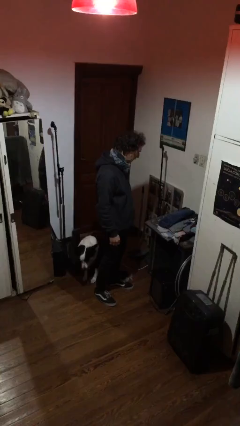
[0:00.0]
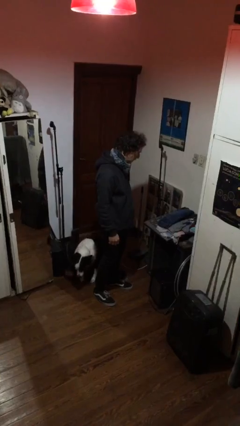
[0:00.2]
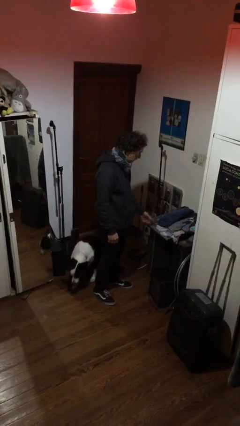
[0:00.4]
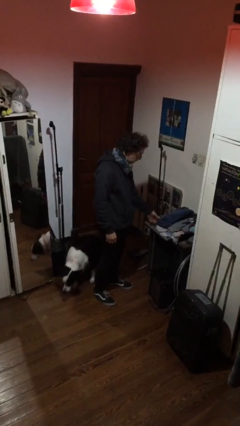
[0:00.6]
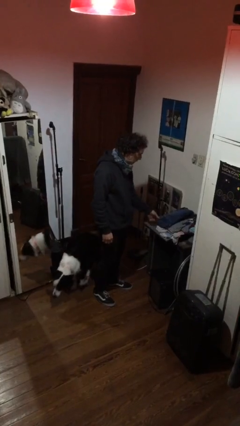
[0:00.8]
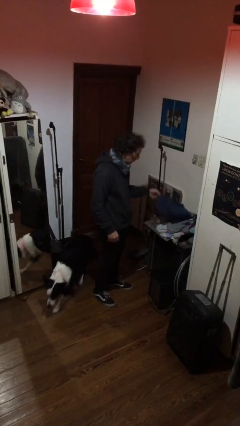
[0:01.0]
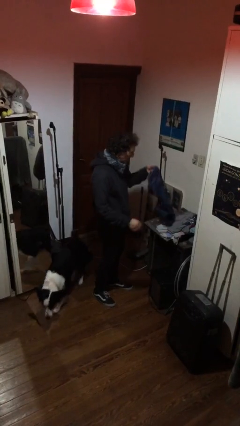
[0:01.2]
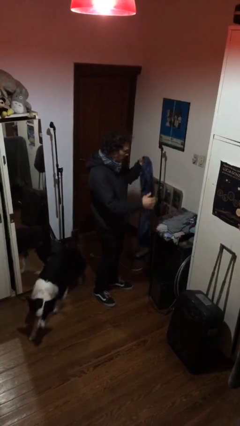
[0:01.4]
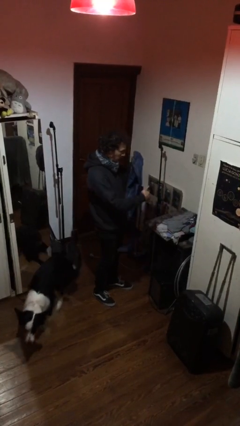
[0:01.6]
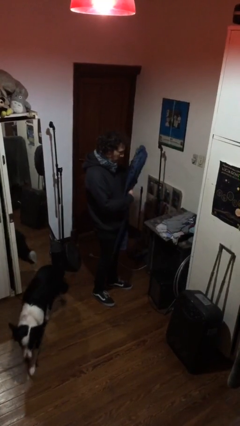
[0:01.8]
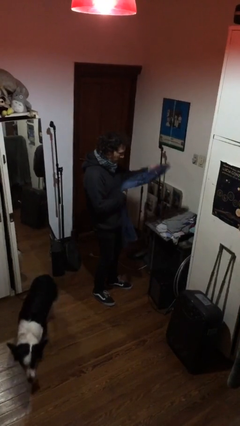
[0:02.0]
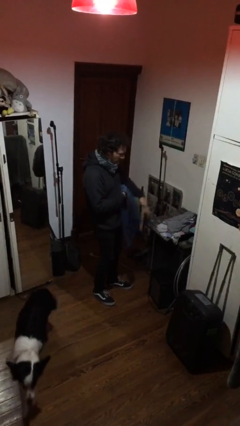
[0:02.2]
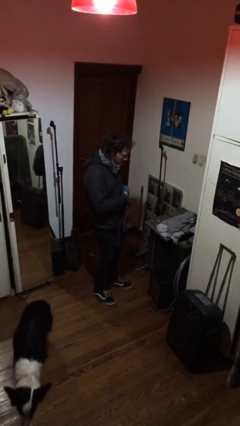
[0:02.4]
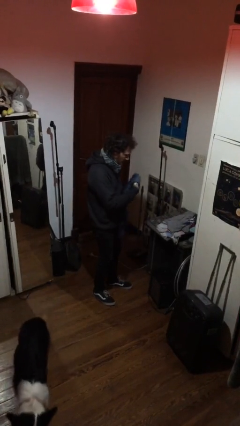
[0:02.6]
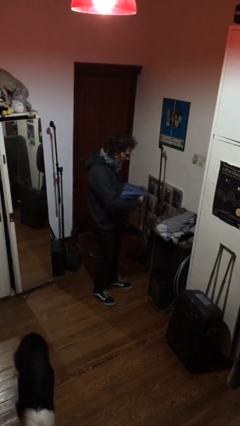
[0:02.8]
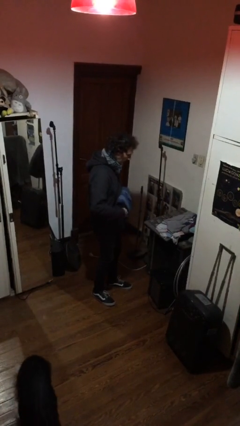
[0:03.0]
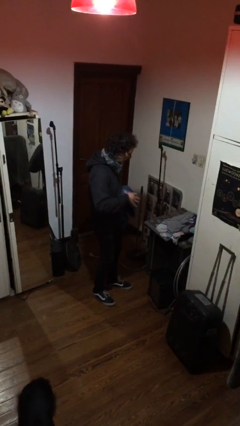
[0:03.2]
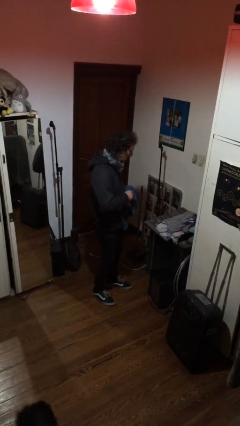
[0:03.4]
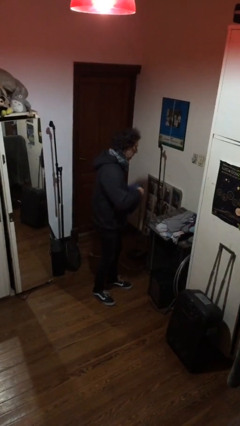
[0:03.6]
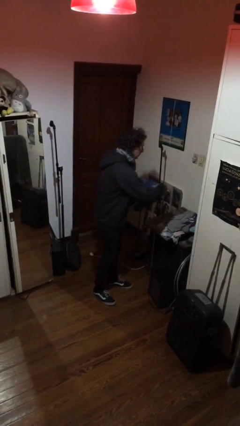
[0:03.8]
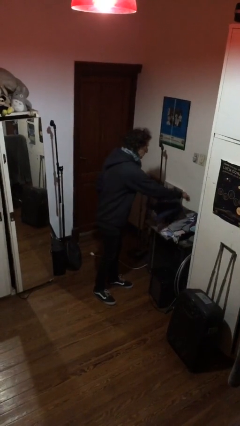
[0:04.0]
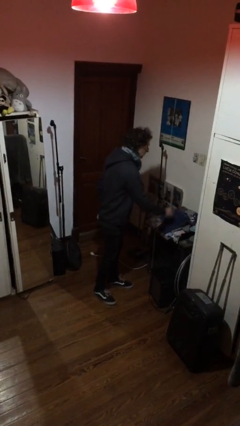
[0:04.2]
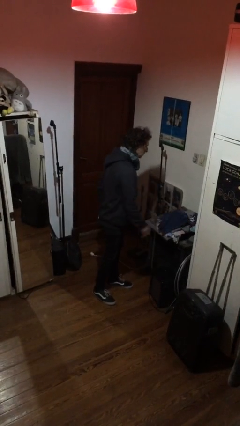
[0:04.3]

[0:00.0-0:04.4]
person folds pants

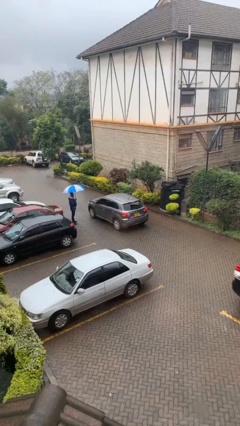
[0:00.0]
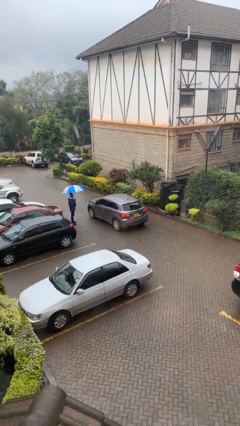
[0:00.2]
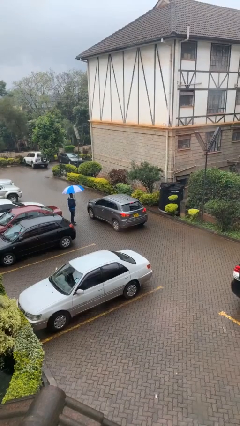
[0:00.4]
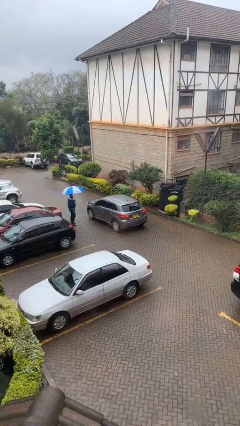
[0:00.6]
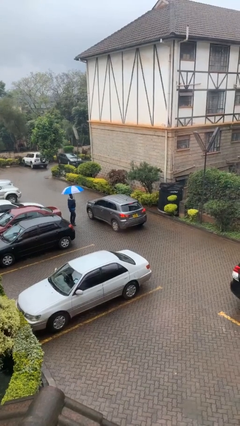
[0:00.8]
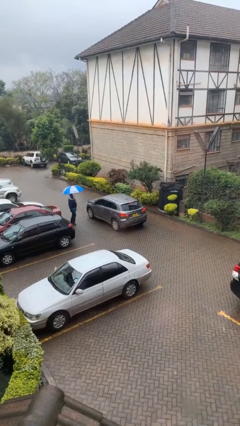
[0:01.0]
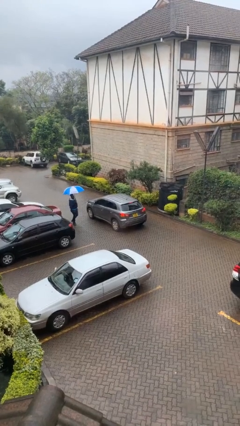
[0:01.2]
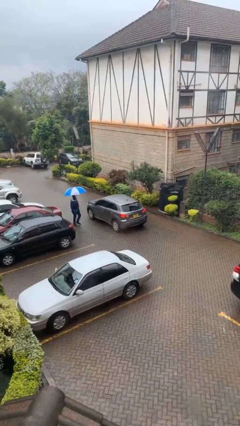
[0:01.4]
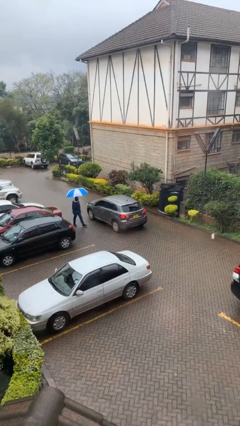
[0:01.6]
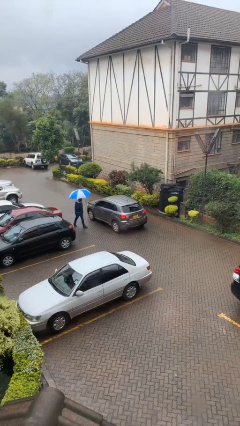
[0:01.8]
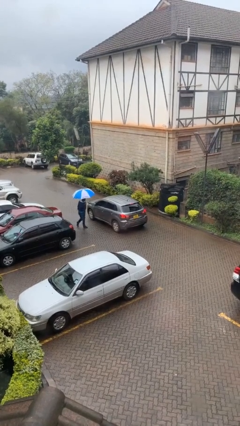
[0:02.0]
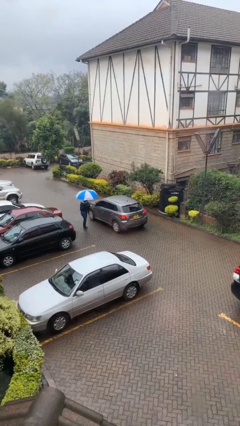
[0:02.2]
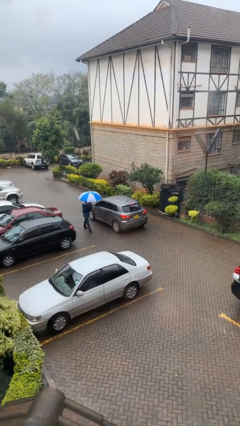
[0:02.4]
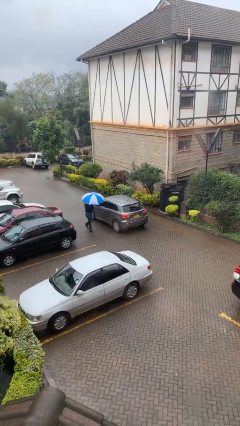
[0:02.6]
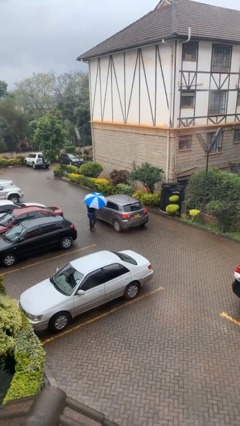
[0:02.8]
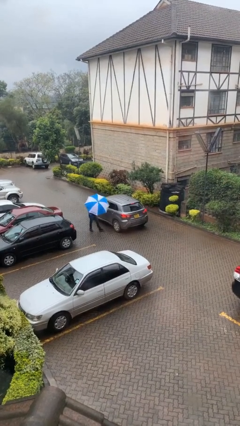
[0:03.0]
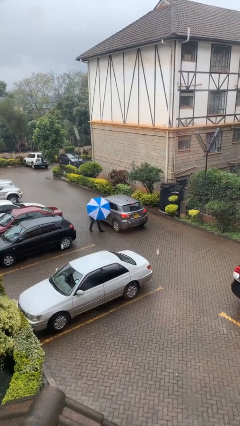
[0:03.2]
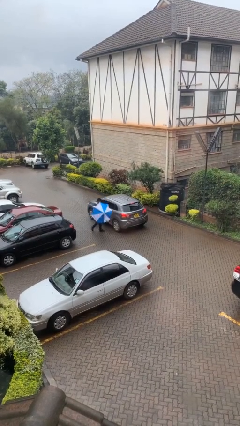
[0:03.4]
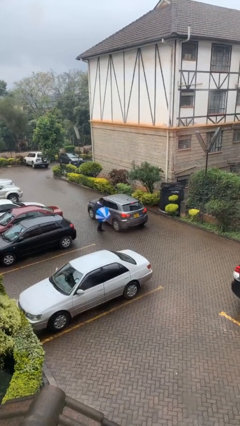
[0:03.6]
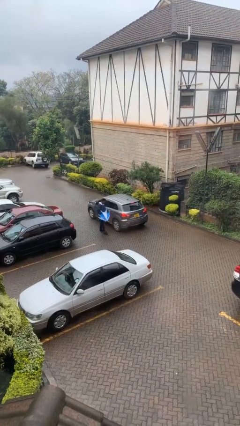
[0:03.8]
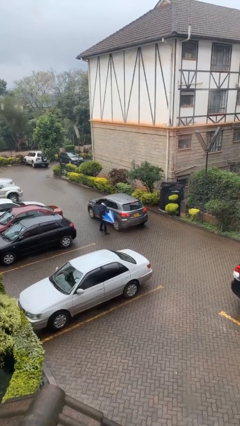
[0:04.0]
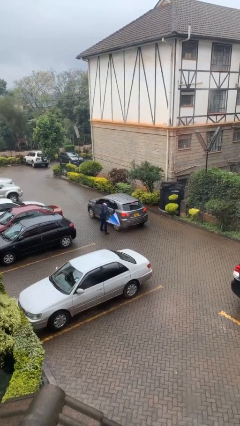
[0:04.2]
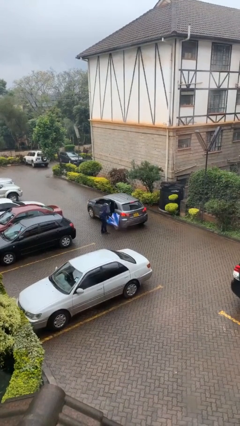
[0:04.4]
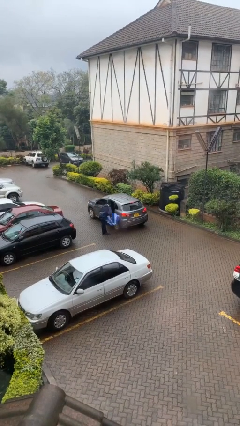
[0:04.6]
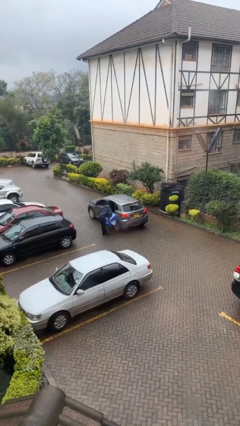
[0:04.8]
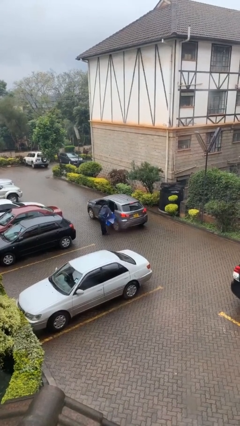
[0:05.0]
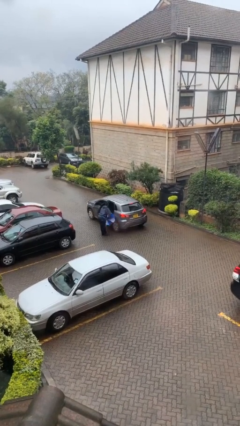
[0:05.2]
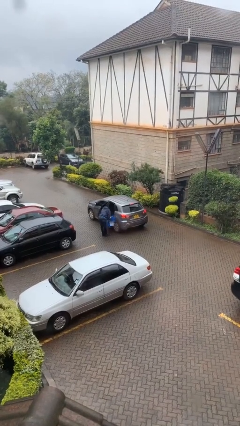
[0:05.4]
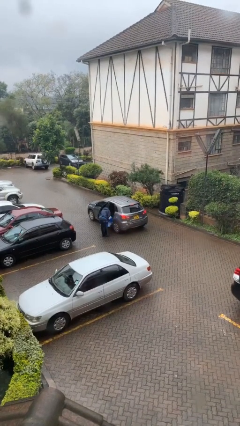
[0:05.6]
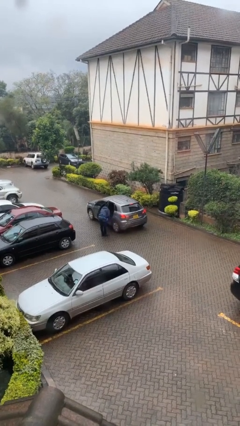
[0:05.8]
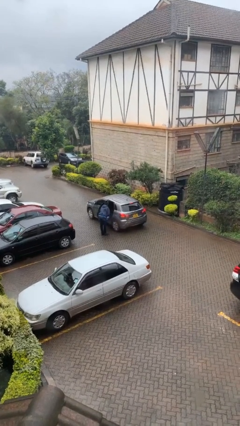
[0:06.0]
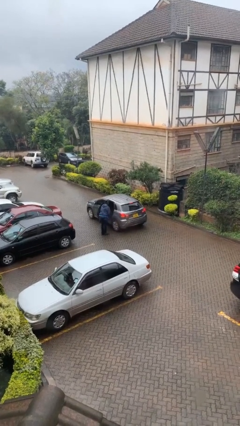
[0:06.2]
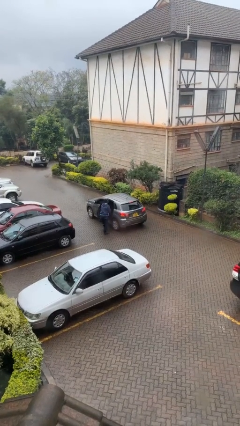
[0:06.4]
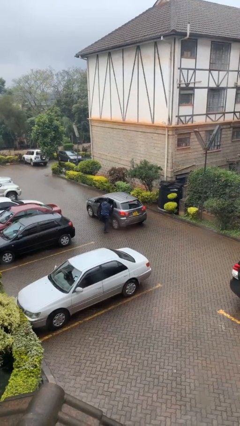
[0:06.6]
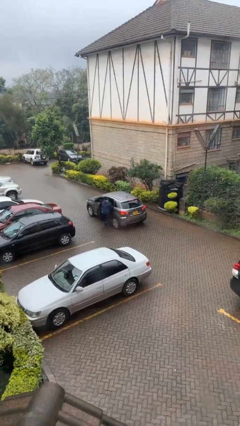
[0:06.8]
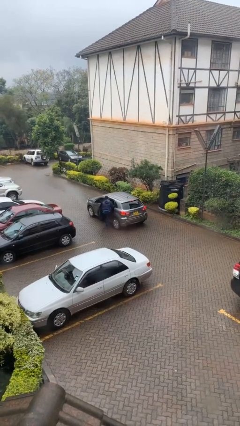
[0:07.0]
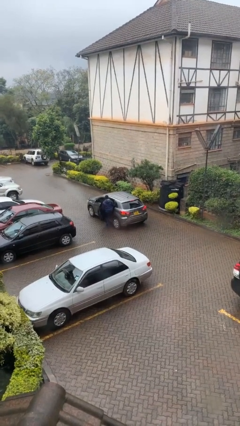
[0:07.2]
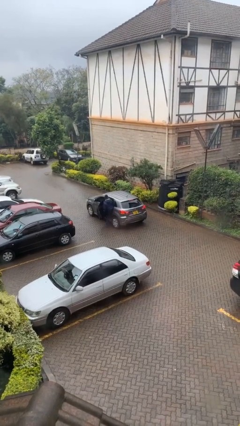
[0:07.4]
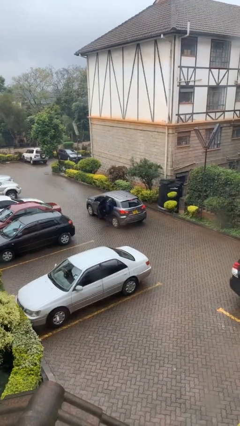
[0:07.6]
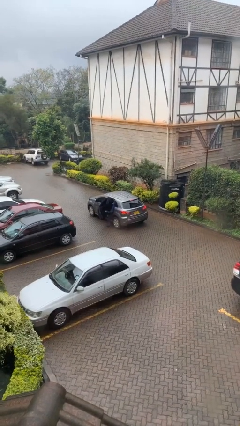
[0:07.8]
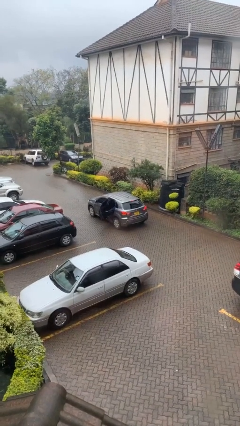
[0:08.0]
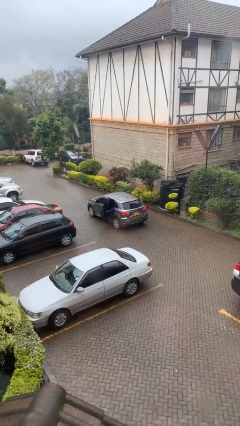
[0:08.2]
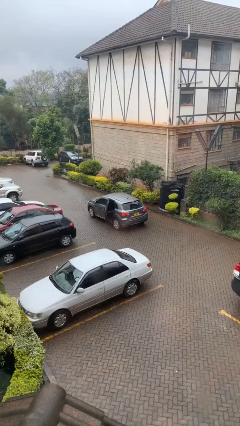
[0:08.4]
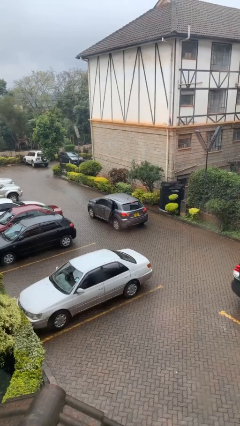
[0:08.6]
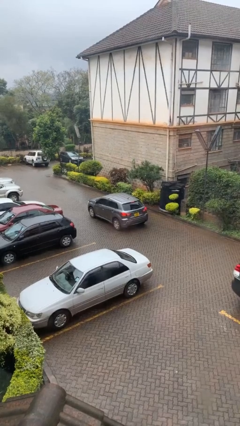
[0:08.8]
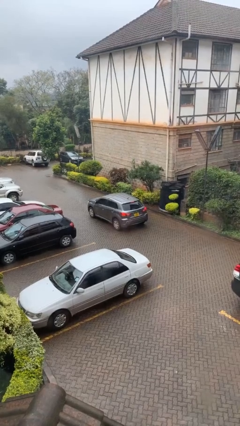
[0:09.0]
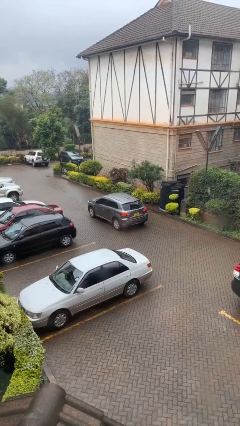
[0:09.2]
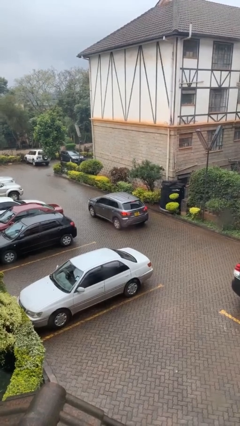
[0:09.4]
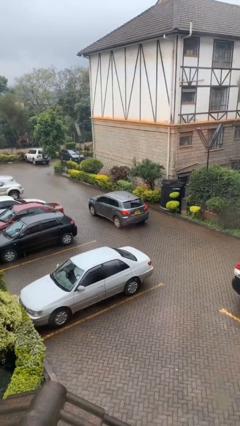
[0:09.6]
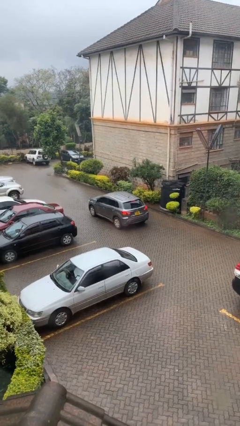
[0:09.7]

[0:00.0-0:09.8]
car picks up person

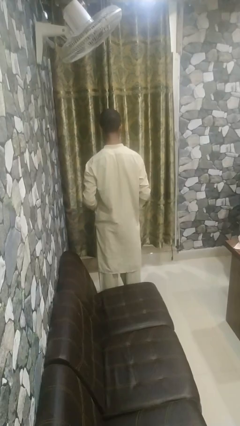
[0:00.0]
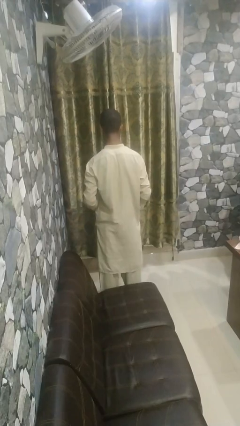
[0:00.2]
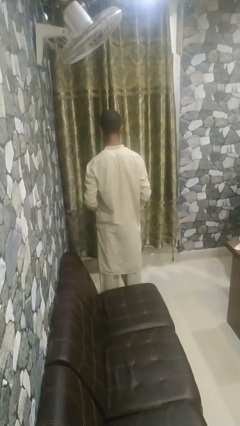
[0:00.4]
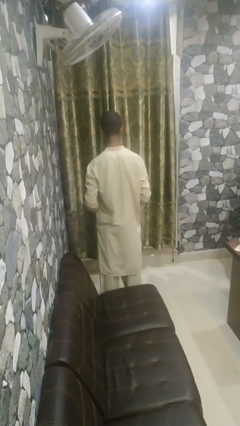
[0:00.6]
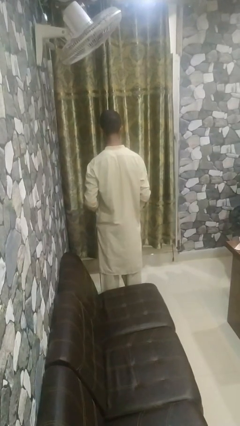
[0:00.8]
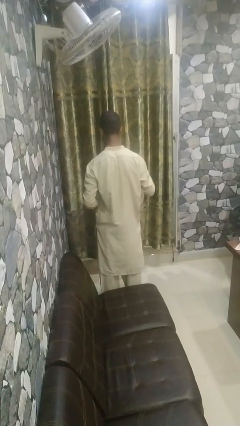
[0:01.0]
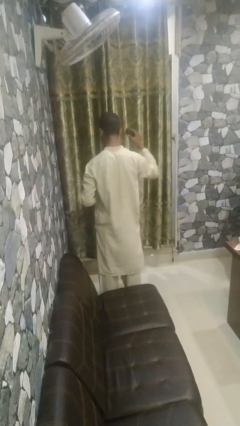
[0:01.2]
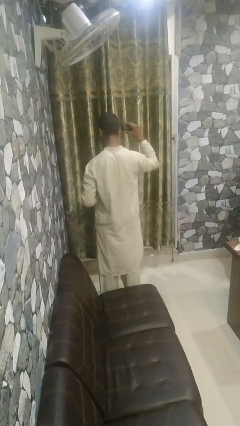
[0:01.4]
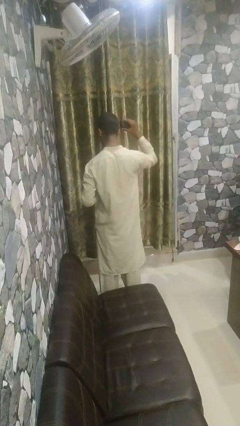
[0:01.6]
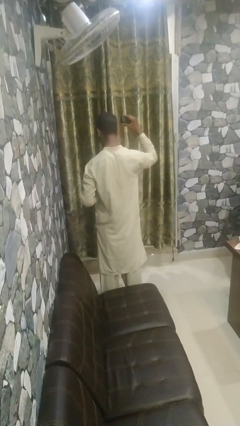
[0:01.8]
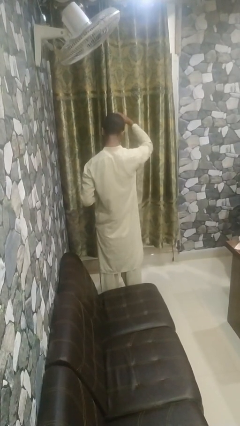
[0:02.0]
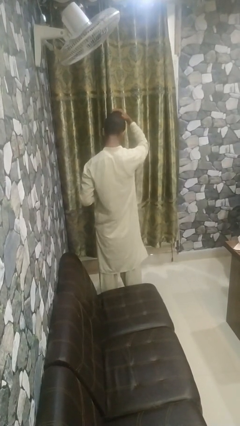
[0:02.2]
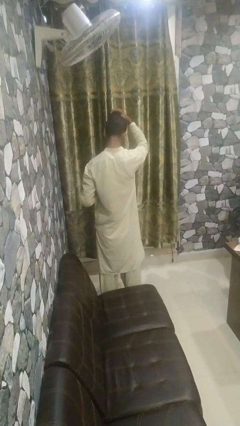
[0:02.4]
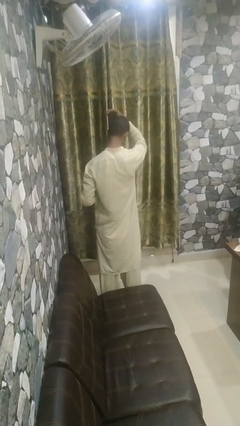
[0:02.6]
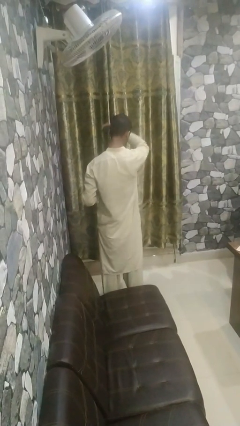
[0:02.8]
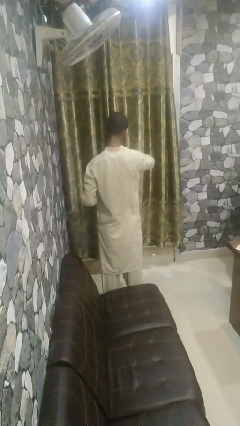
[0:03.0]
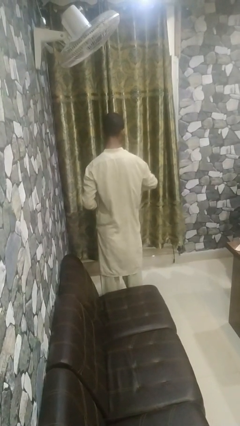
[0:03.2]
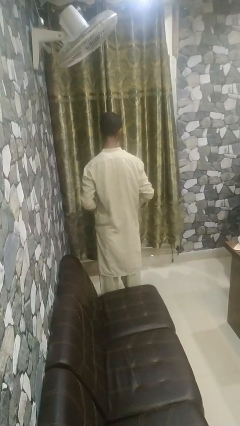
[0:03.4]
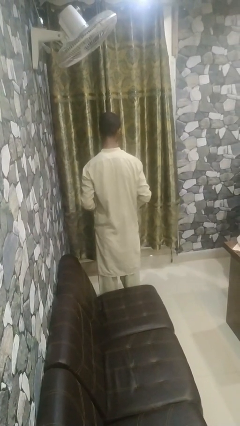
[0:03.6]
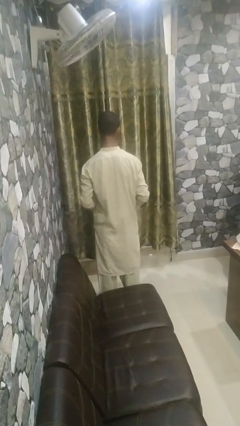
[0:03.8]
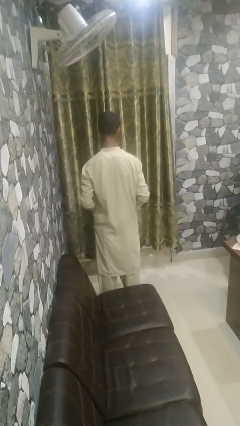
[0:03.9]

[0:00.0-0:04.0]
person dries hair with hairdryer
